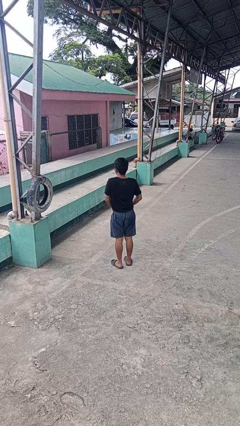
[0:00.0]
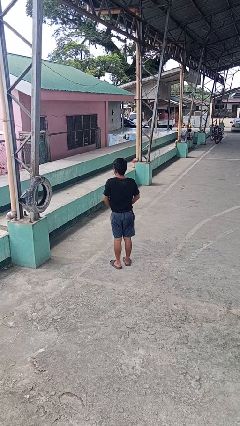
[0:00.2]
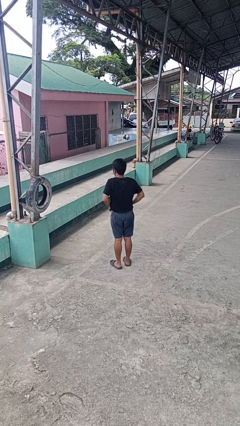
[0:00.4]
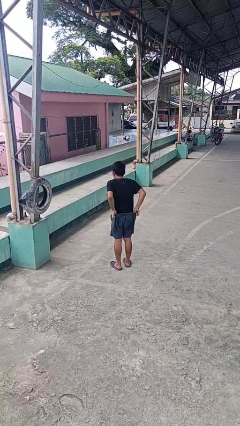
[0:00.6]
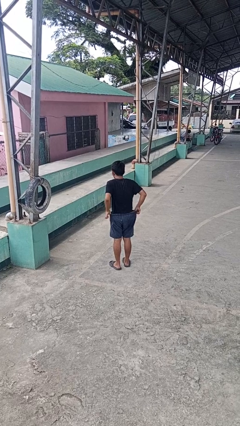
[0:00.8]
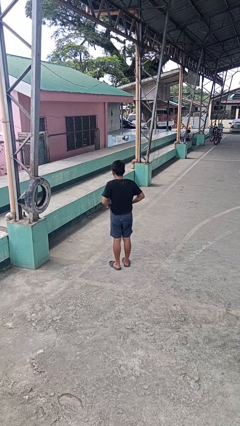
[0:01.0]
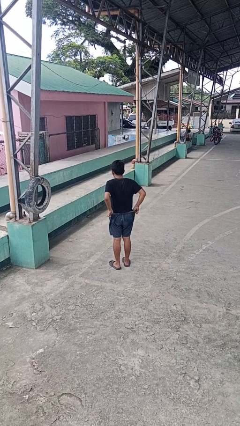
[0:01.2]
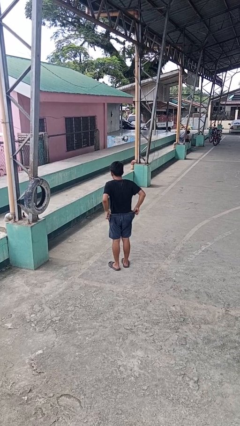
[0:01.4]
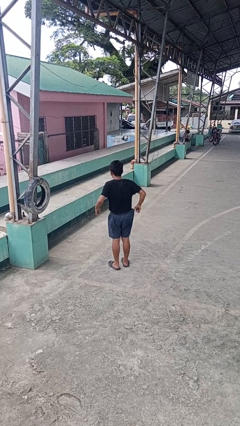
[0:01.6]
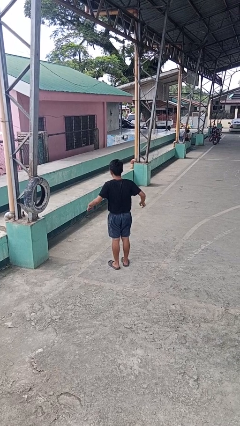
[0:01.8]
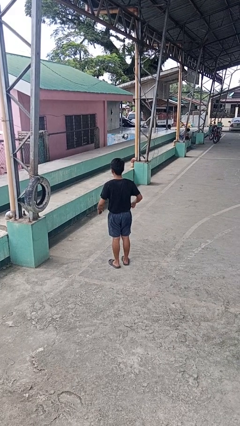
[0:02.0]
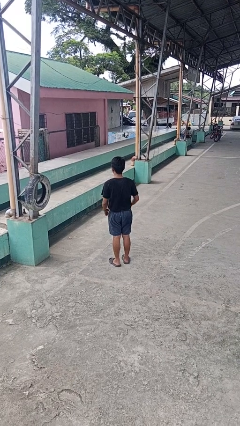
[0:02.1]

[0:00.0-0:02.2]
person hikes up pants

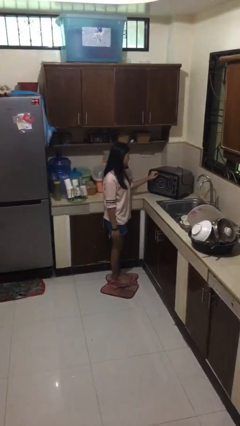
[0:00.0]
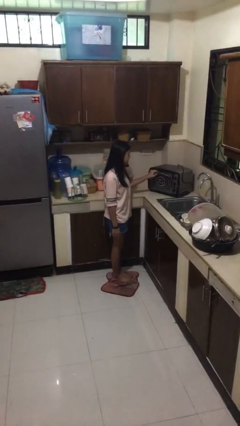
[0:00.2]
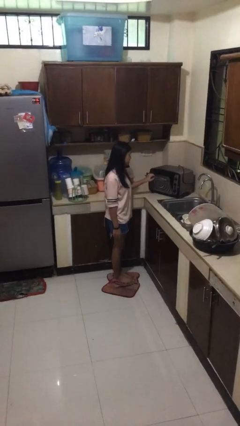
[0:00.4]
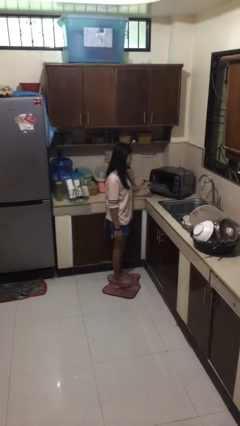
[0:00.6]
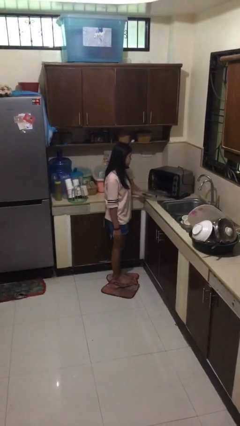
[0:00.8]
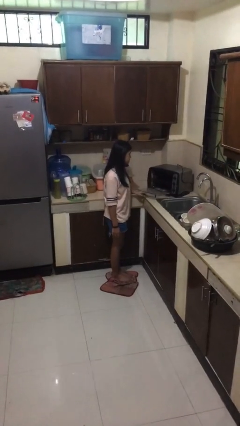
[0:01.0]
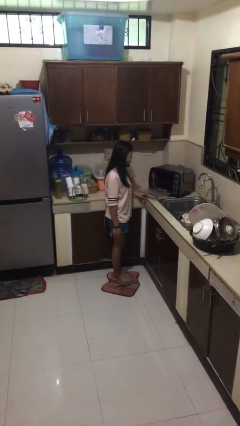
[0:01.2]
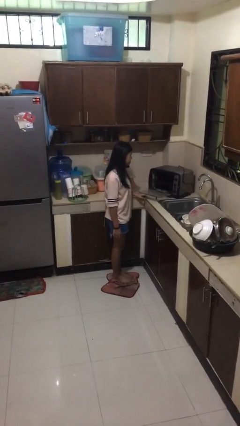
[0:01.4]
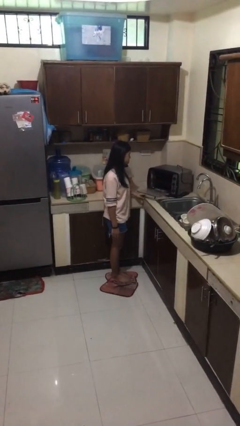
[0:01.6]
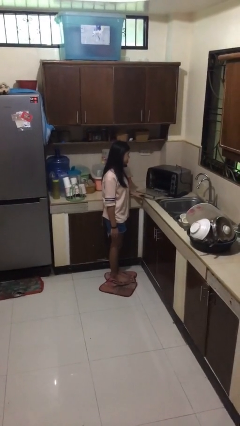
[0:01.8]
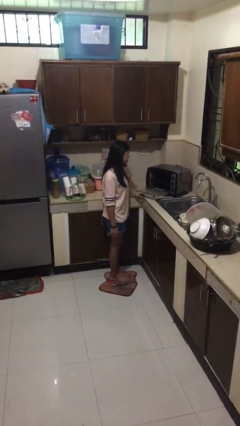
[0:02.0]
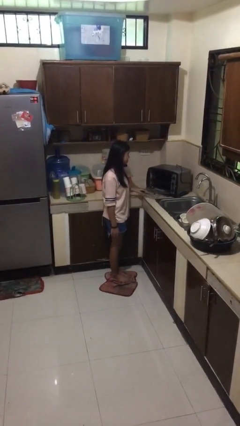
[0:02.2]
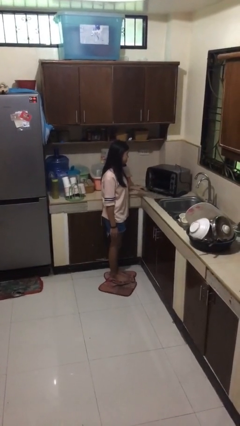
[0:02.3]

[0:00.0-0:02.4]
person opens microwave

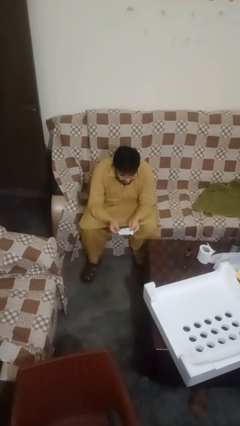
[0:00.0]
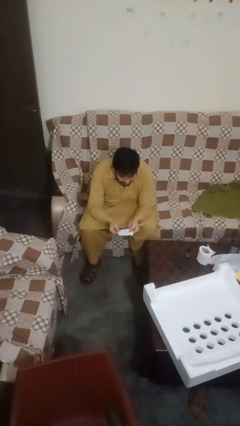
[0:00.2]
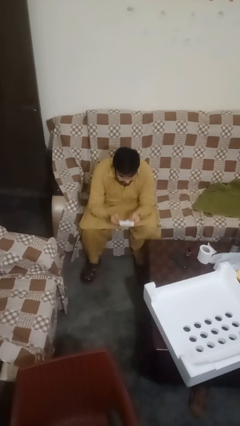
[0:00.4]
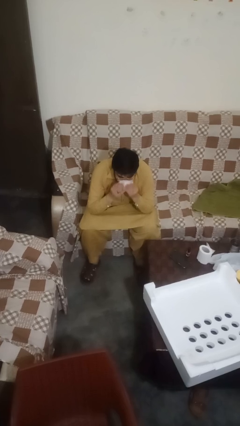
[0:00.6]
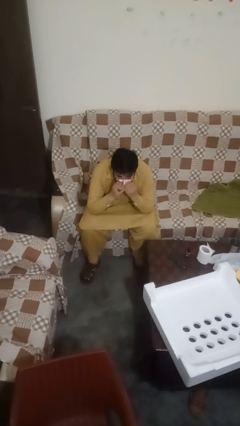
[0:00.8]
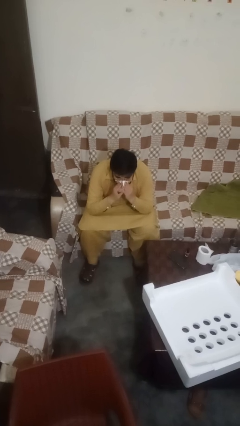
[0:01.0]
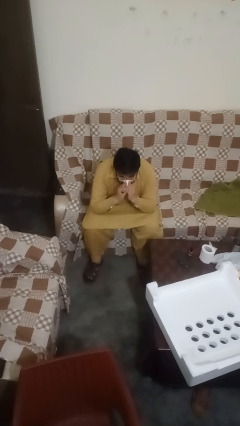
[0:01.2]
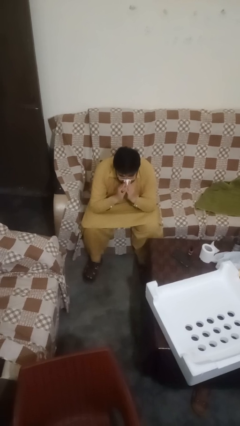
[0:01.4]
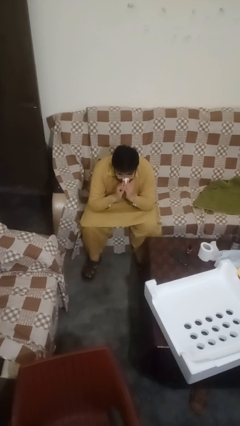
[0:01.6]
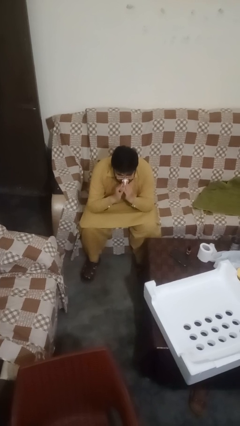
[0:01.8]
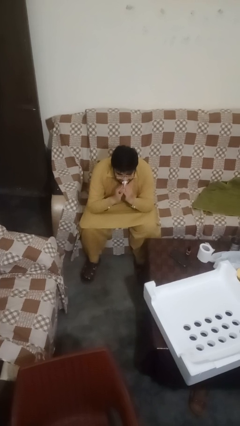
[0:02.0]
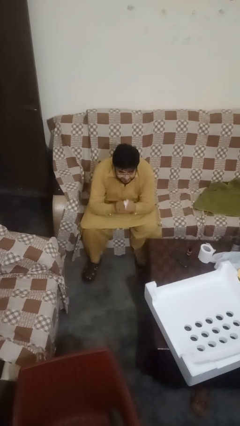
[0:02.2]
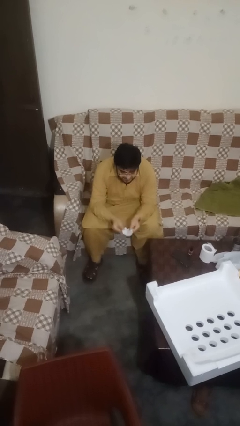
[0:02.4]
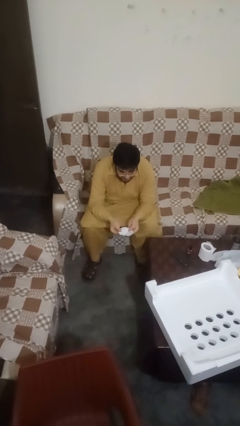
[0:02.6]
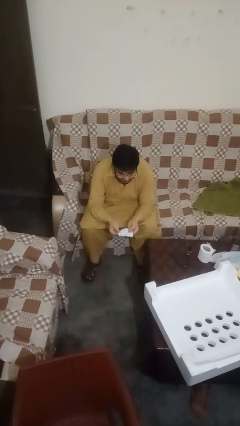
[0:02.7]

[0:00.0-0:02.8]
person blows nose

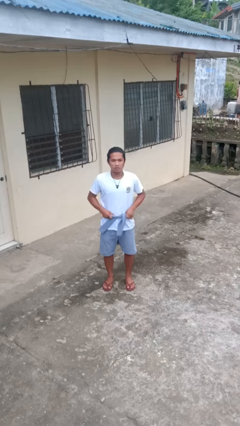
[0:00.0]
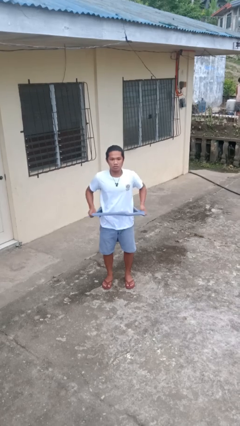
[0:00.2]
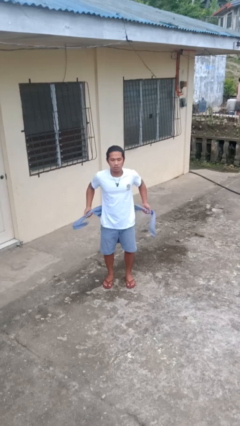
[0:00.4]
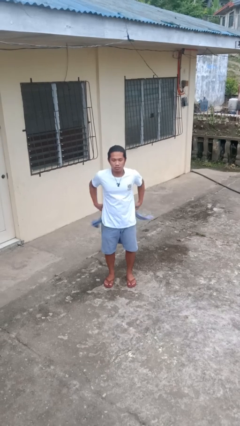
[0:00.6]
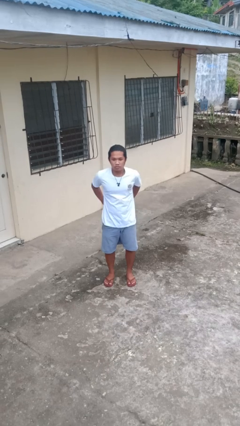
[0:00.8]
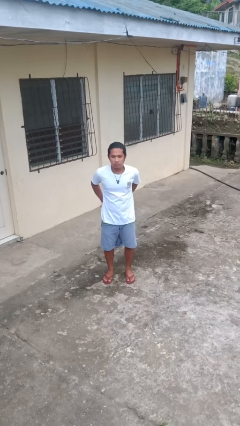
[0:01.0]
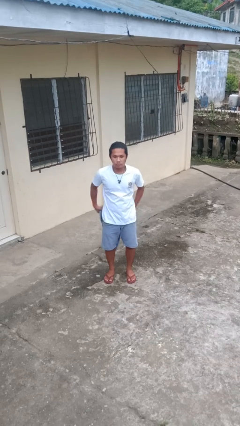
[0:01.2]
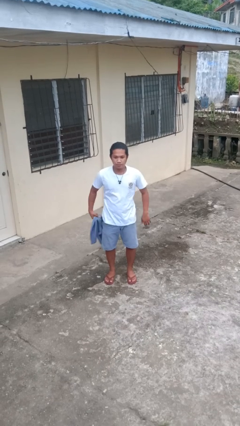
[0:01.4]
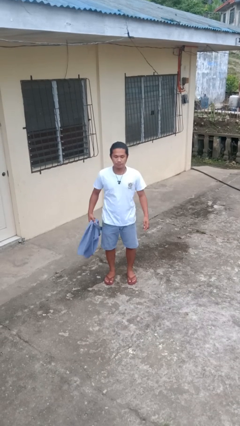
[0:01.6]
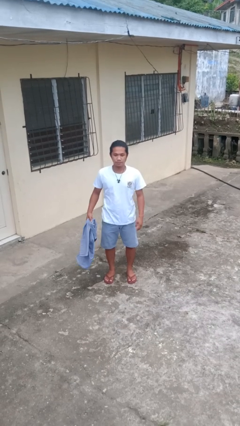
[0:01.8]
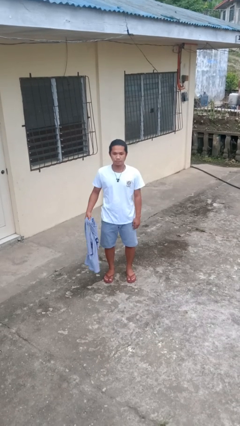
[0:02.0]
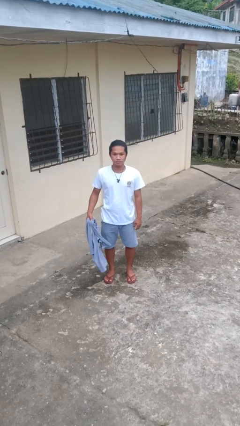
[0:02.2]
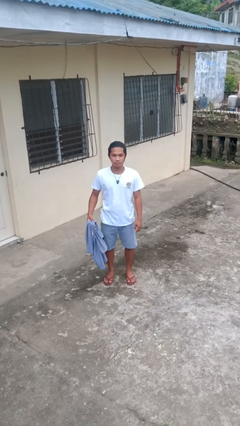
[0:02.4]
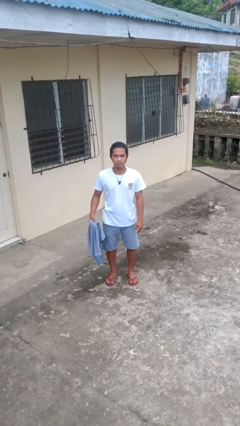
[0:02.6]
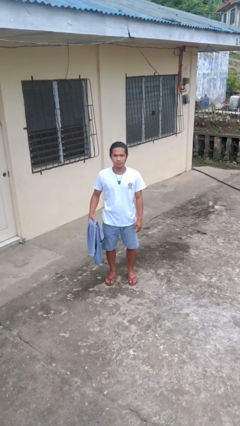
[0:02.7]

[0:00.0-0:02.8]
person unties jacket around waist

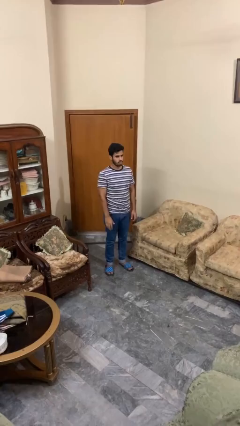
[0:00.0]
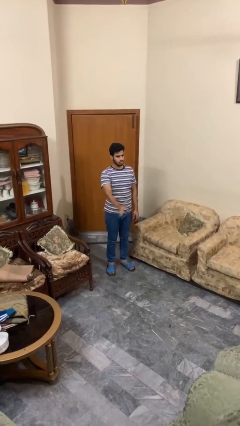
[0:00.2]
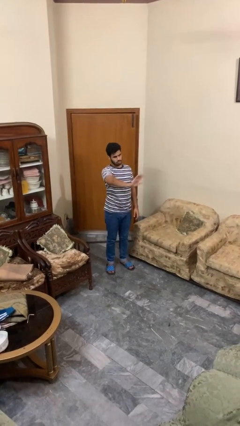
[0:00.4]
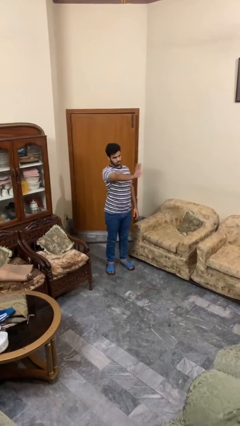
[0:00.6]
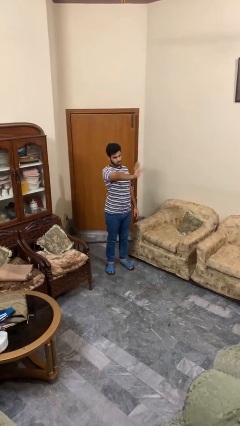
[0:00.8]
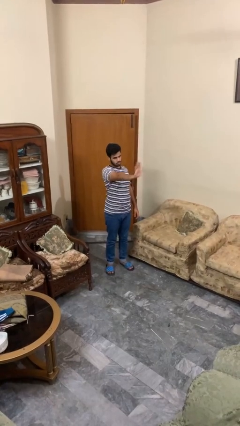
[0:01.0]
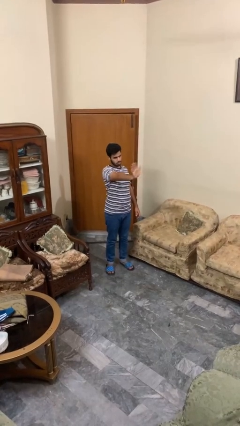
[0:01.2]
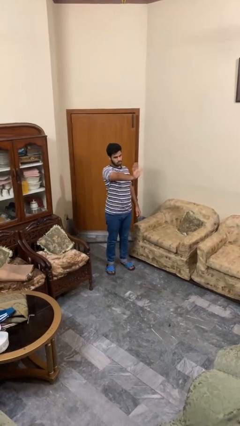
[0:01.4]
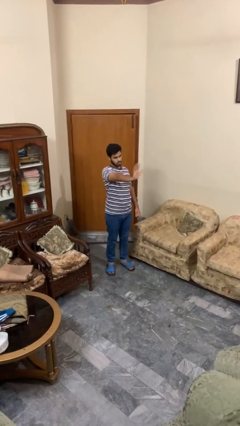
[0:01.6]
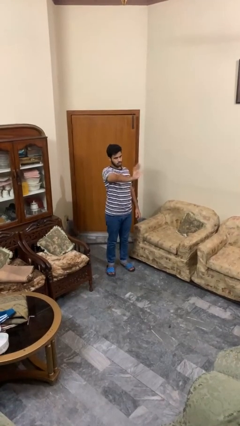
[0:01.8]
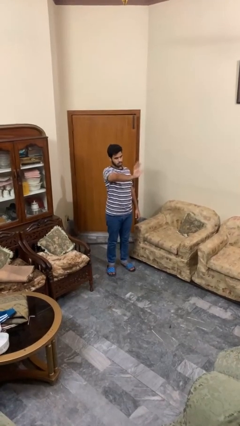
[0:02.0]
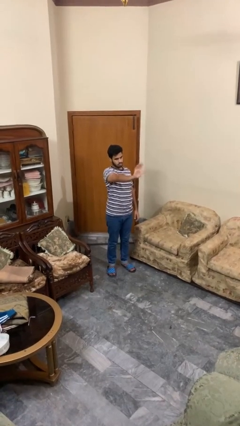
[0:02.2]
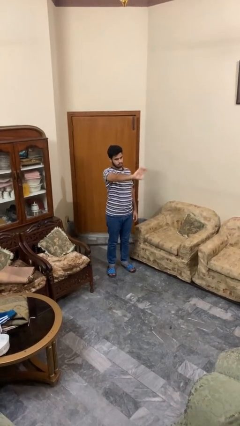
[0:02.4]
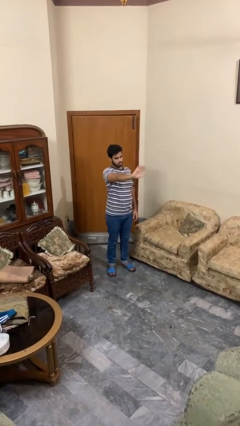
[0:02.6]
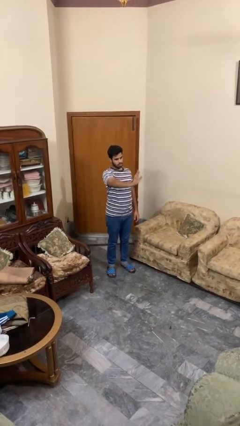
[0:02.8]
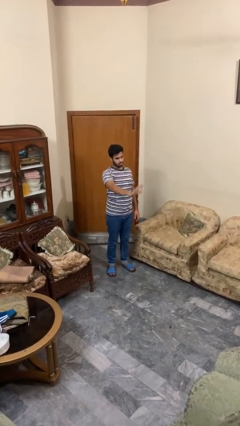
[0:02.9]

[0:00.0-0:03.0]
person waves at person

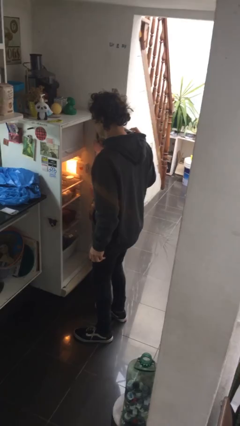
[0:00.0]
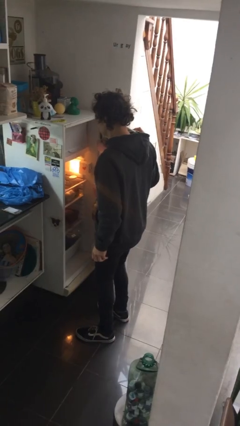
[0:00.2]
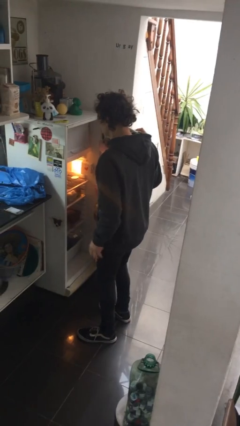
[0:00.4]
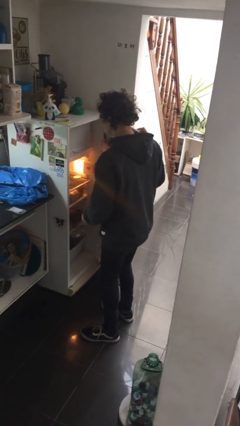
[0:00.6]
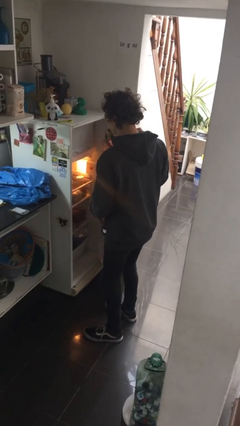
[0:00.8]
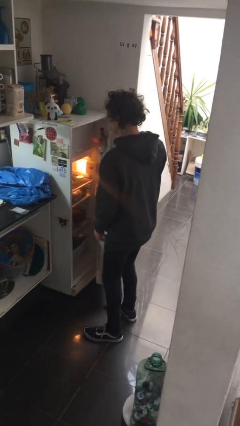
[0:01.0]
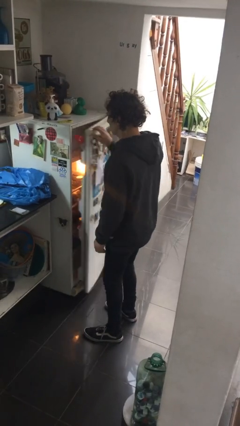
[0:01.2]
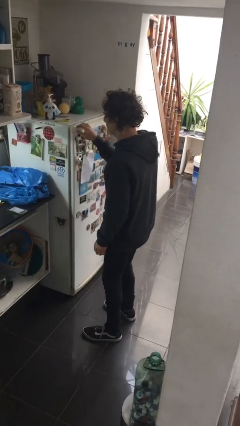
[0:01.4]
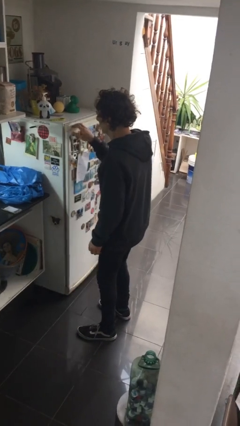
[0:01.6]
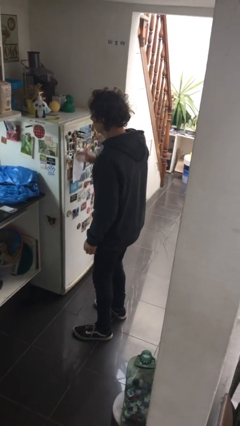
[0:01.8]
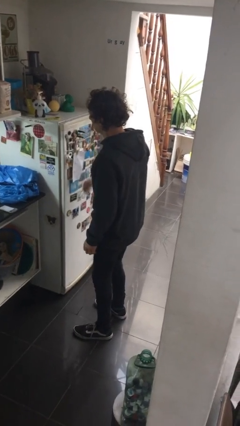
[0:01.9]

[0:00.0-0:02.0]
person closes refrigerator

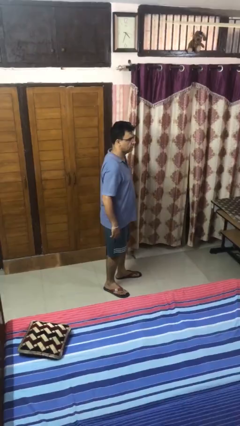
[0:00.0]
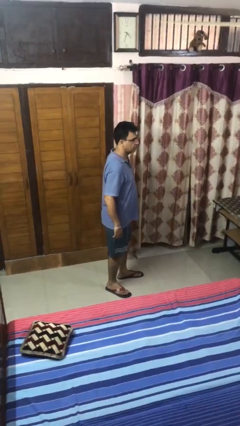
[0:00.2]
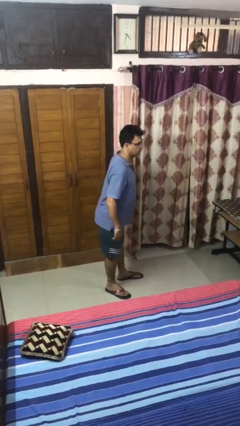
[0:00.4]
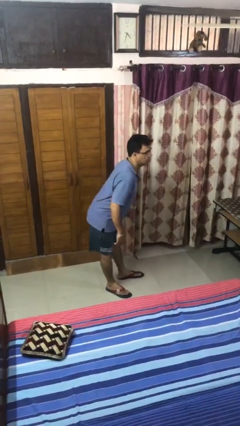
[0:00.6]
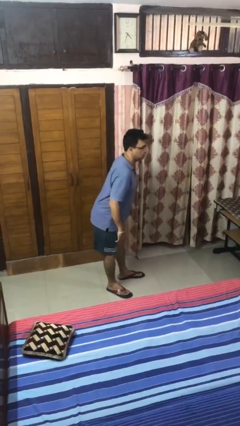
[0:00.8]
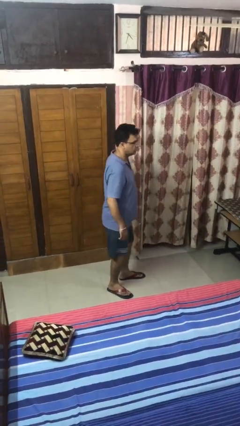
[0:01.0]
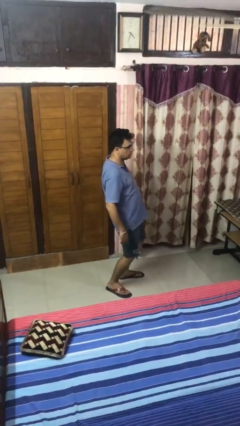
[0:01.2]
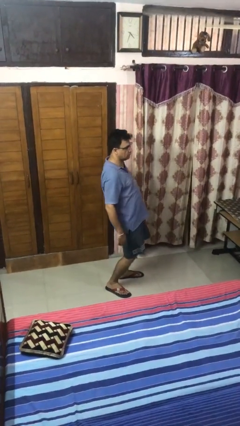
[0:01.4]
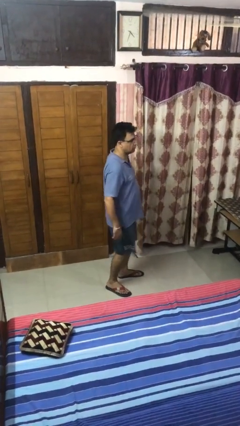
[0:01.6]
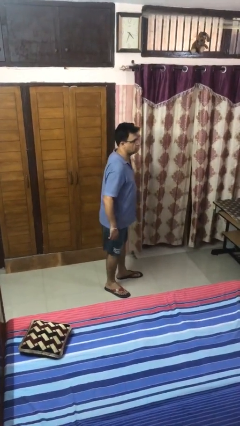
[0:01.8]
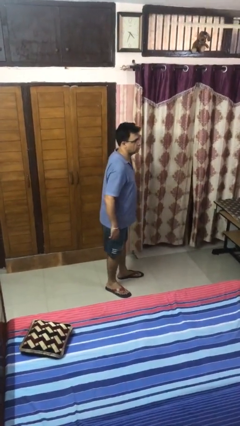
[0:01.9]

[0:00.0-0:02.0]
person wiggles hips
